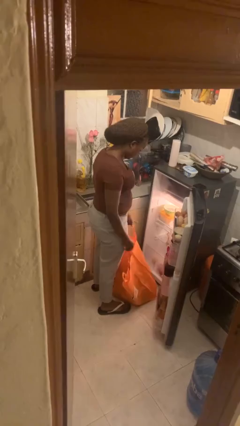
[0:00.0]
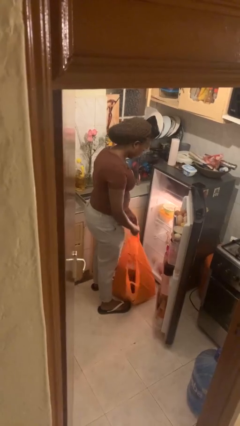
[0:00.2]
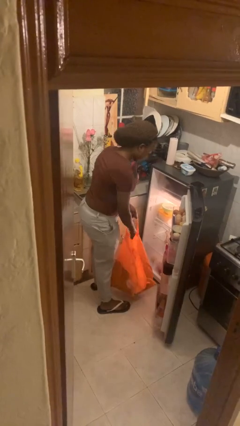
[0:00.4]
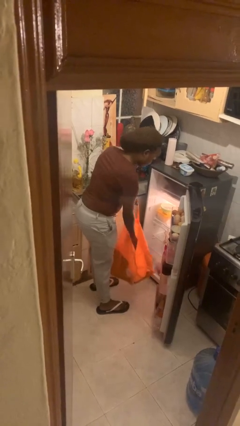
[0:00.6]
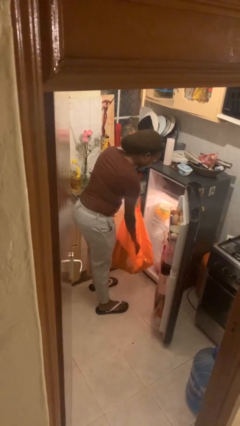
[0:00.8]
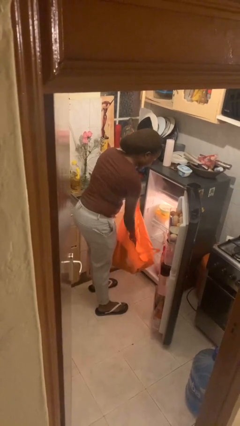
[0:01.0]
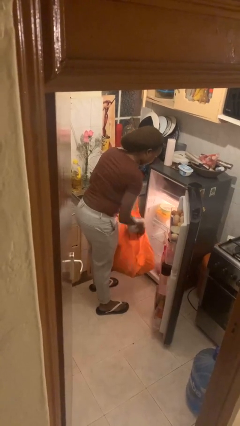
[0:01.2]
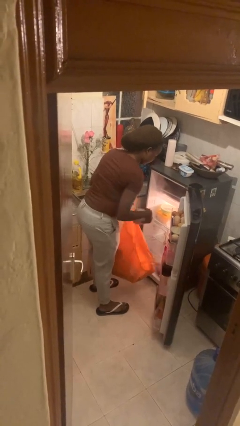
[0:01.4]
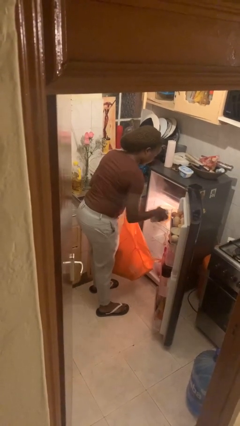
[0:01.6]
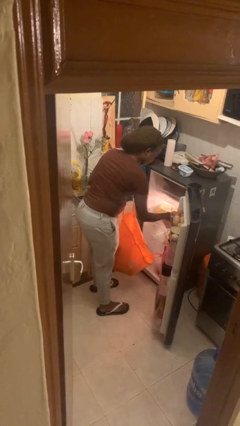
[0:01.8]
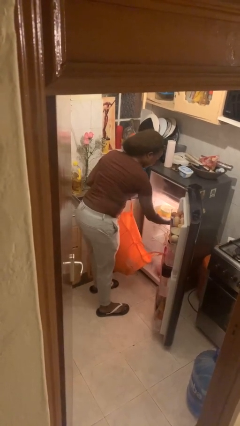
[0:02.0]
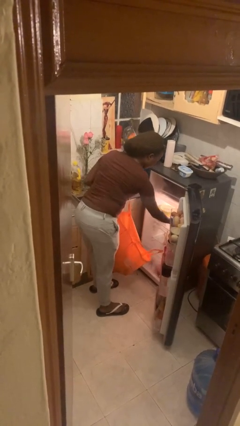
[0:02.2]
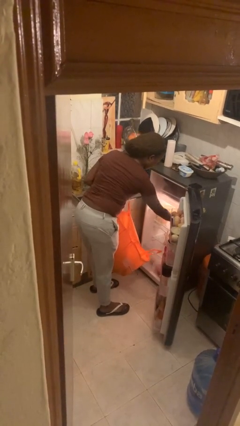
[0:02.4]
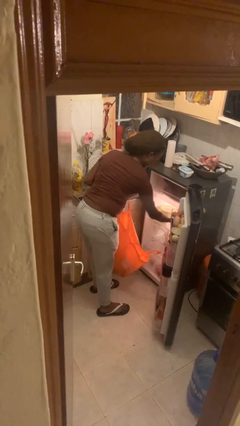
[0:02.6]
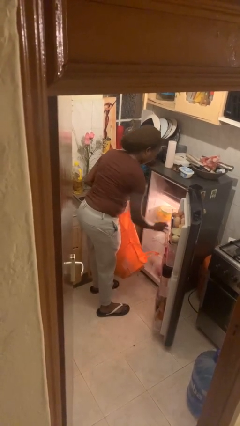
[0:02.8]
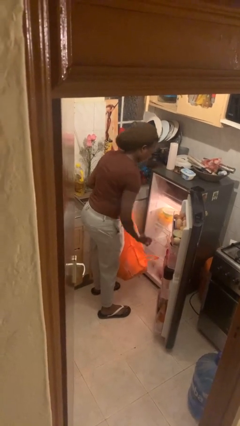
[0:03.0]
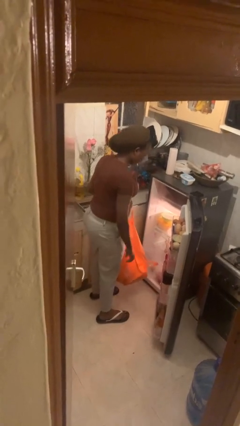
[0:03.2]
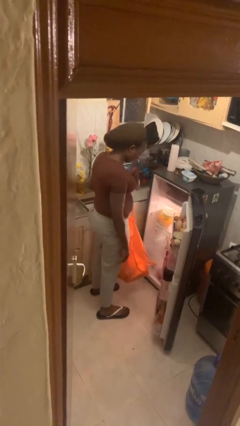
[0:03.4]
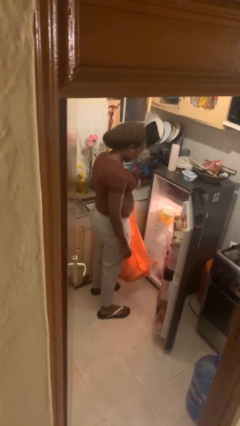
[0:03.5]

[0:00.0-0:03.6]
person loads groceries into refrigerator

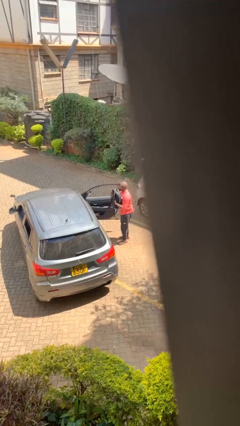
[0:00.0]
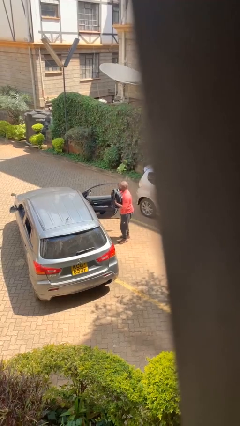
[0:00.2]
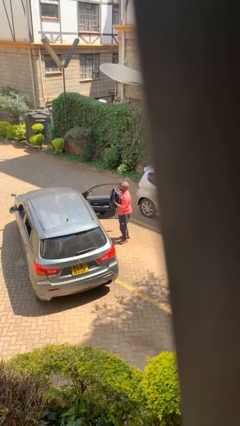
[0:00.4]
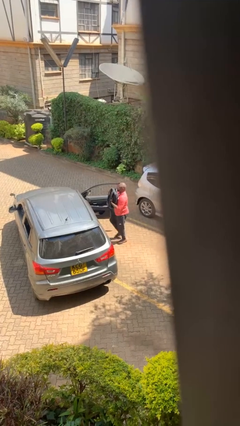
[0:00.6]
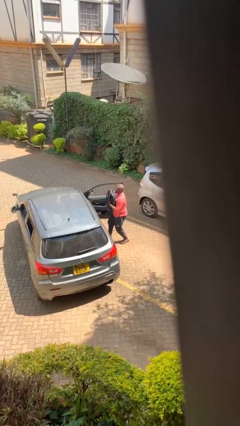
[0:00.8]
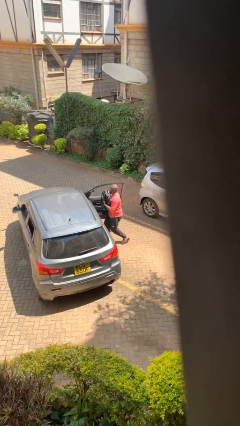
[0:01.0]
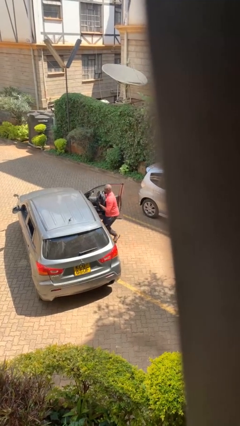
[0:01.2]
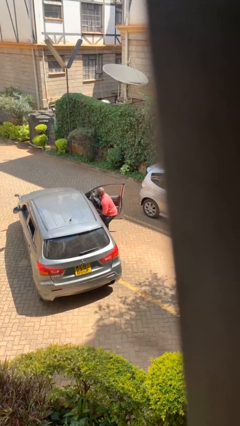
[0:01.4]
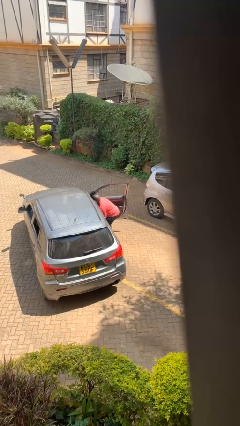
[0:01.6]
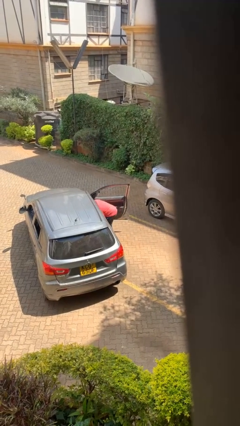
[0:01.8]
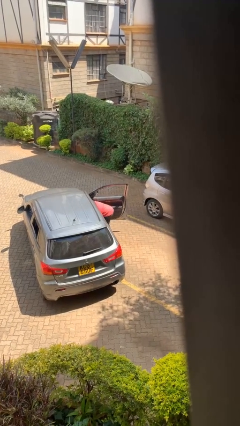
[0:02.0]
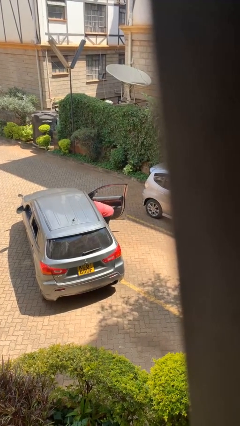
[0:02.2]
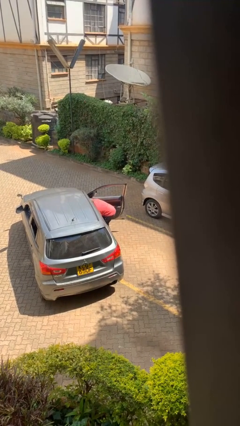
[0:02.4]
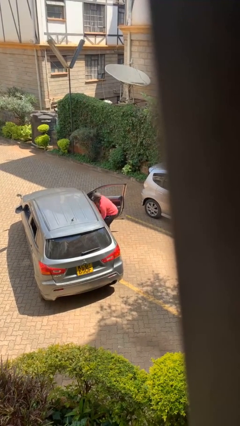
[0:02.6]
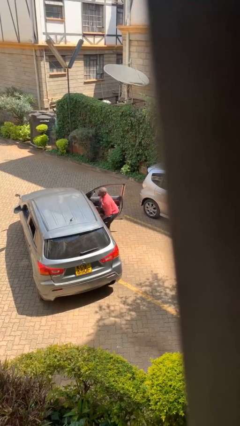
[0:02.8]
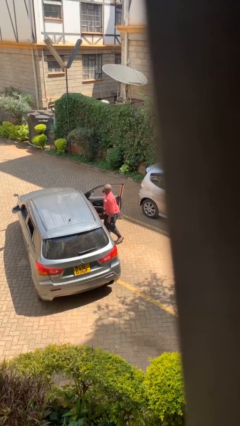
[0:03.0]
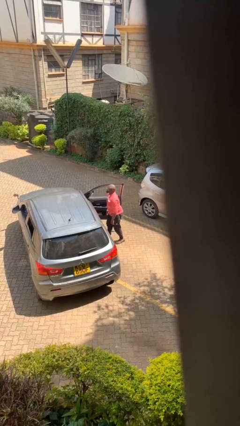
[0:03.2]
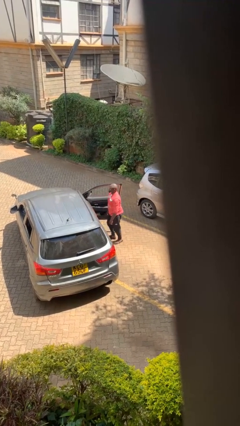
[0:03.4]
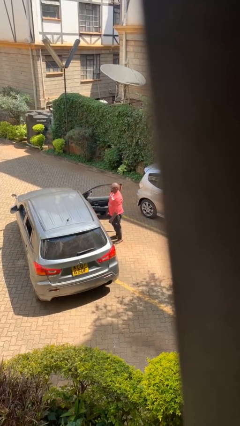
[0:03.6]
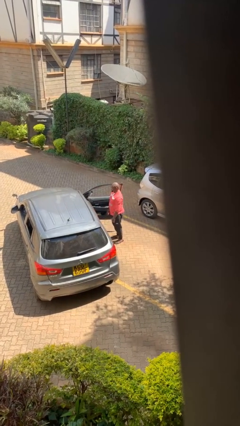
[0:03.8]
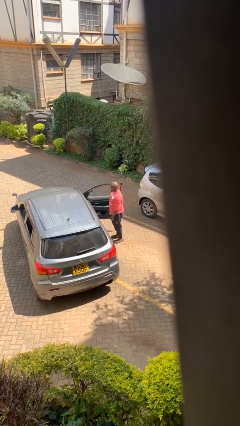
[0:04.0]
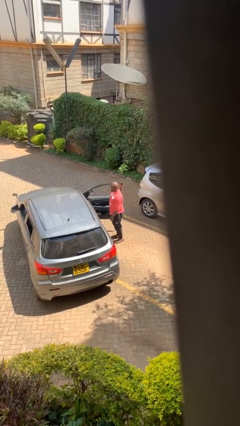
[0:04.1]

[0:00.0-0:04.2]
person loads car

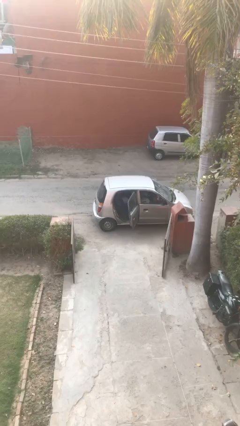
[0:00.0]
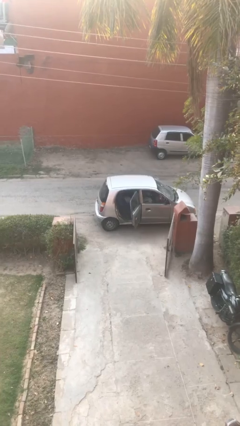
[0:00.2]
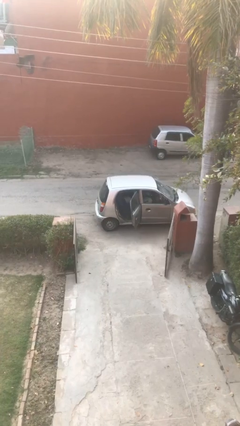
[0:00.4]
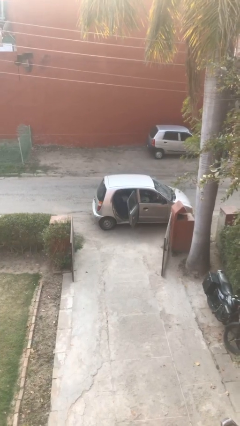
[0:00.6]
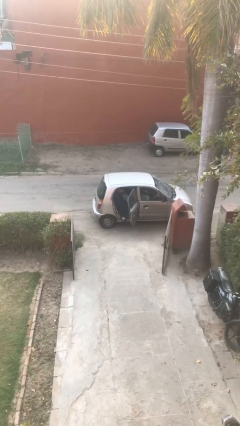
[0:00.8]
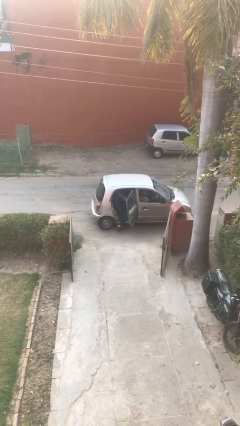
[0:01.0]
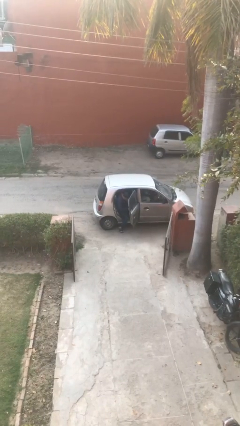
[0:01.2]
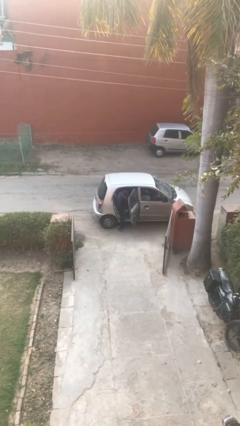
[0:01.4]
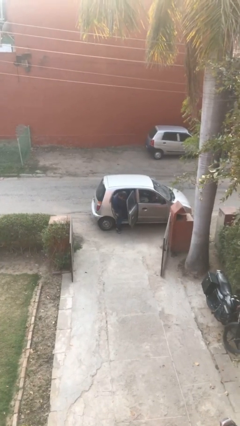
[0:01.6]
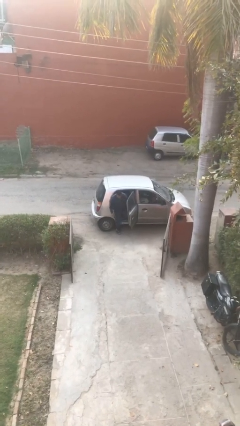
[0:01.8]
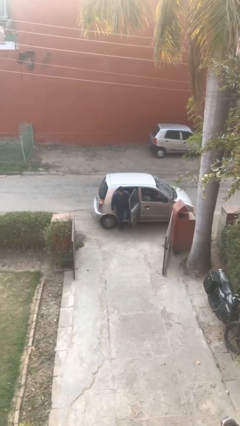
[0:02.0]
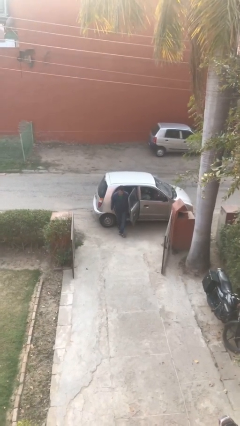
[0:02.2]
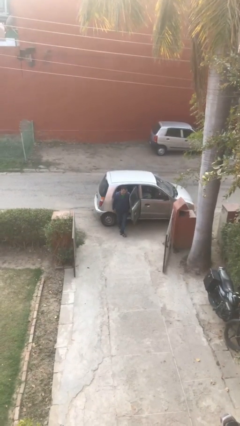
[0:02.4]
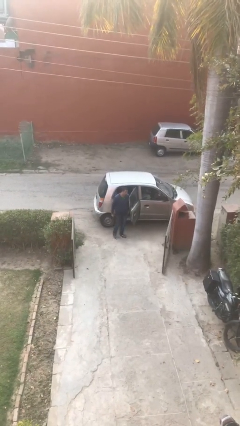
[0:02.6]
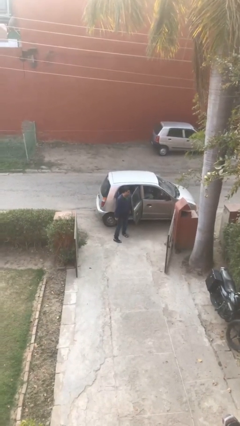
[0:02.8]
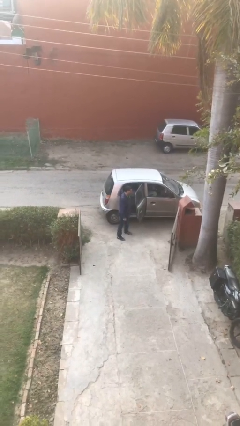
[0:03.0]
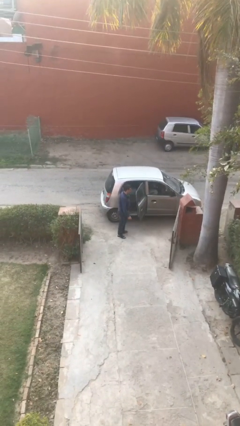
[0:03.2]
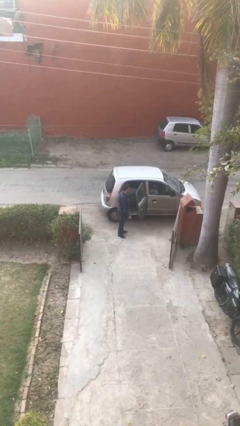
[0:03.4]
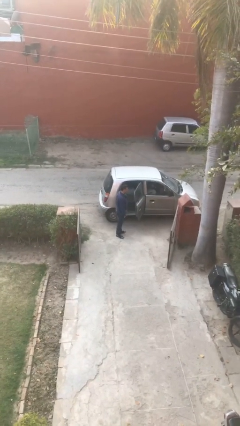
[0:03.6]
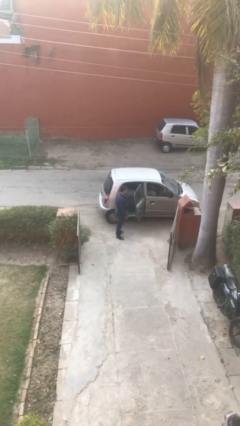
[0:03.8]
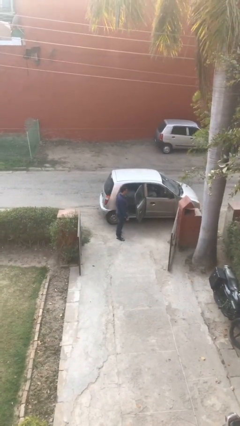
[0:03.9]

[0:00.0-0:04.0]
person exits car

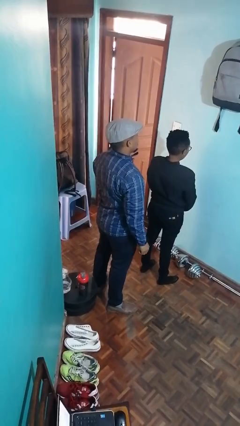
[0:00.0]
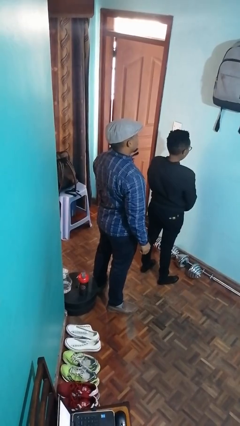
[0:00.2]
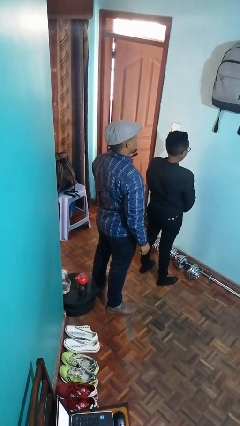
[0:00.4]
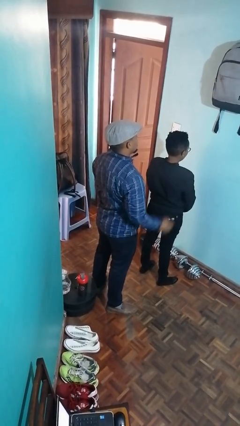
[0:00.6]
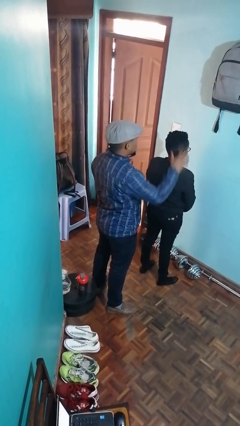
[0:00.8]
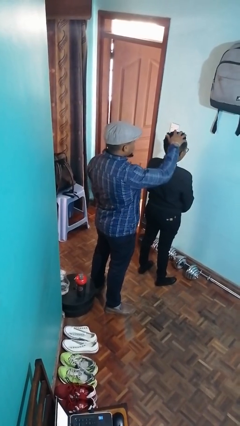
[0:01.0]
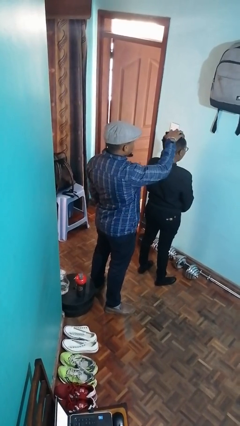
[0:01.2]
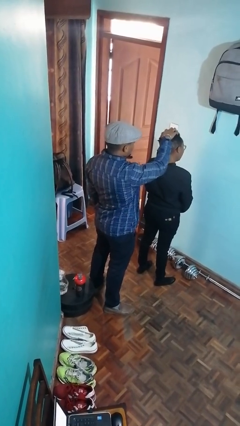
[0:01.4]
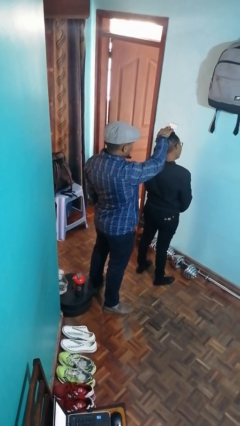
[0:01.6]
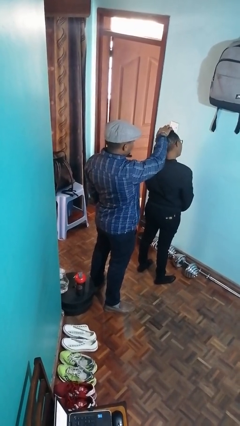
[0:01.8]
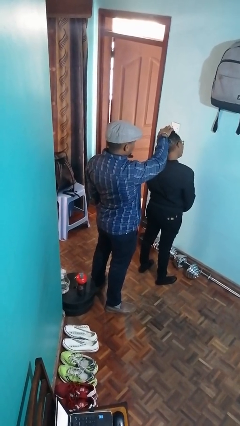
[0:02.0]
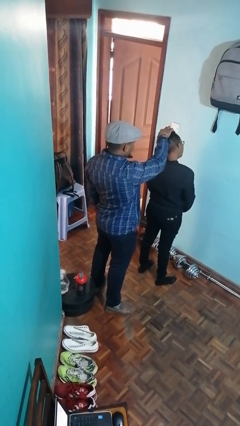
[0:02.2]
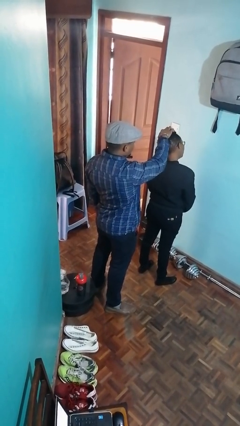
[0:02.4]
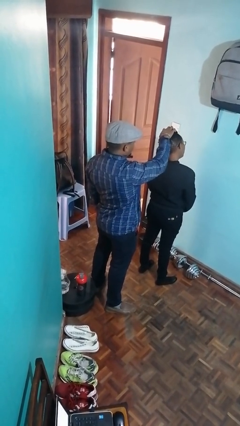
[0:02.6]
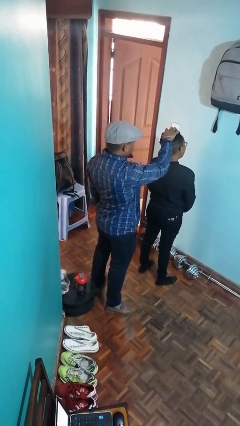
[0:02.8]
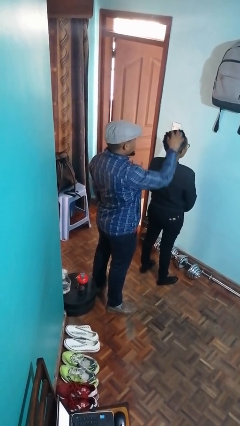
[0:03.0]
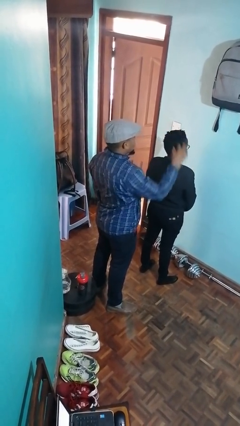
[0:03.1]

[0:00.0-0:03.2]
person grabs person by hair

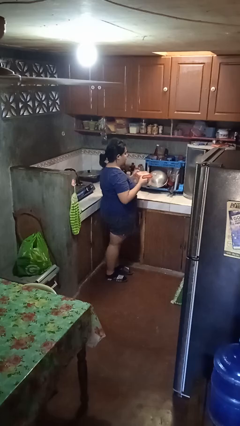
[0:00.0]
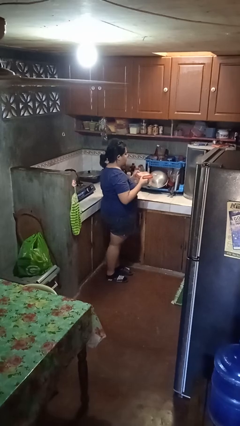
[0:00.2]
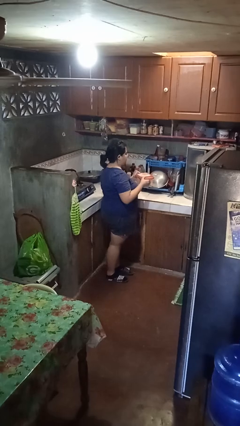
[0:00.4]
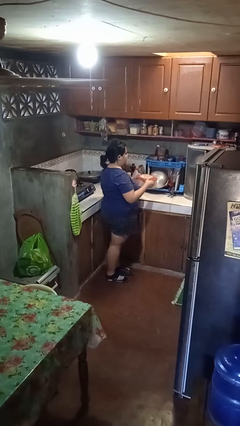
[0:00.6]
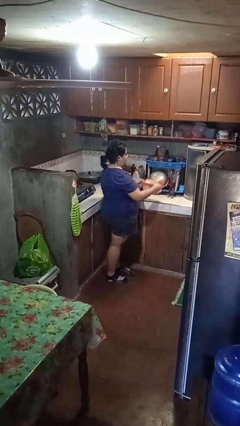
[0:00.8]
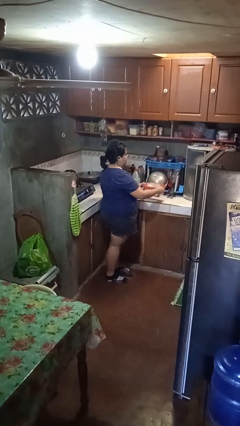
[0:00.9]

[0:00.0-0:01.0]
person puts down object on countertop

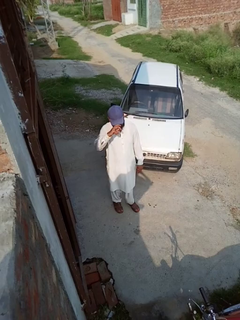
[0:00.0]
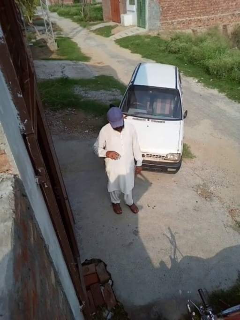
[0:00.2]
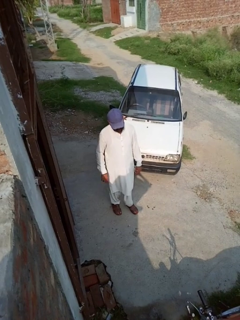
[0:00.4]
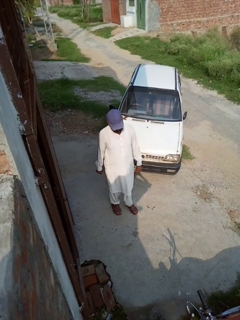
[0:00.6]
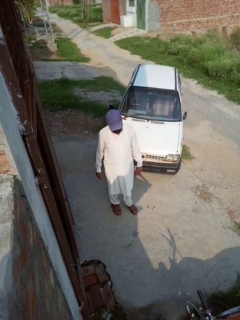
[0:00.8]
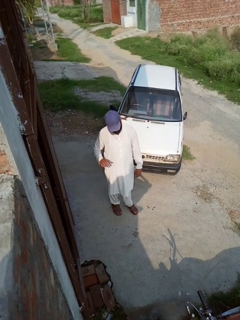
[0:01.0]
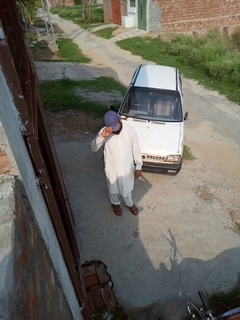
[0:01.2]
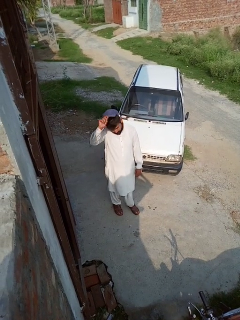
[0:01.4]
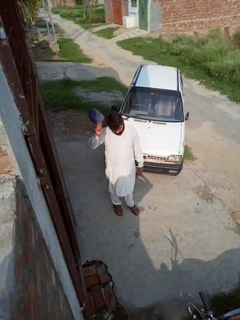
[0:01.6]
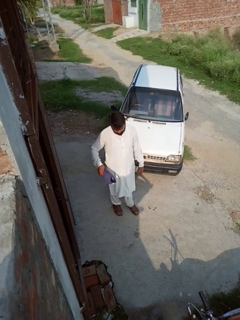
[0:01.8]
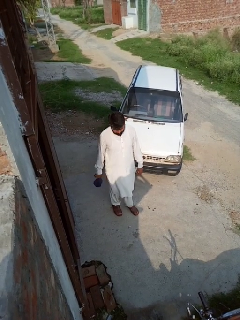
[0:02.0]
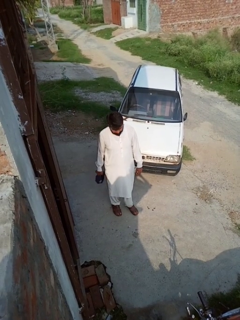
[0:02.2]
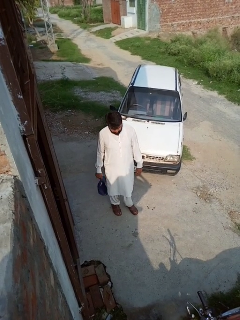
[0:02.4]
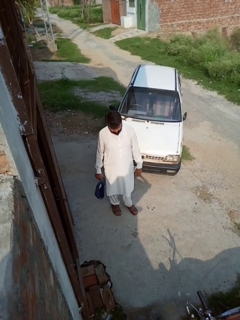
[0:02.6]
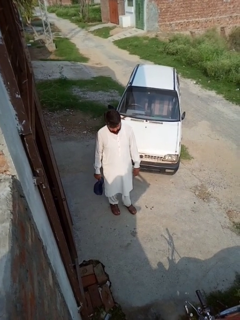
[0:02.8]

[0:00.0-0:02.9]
person takes off hat
